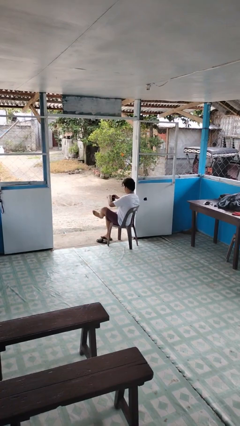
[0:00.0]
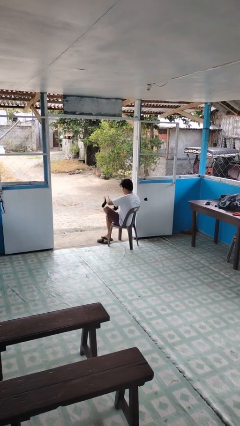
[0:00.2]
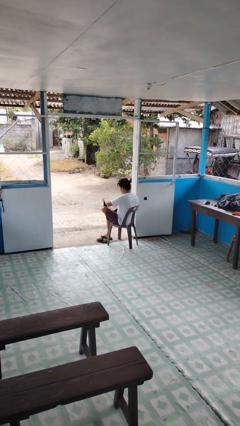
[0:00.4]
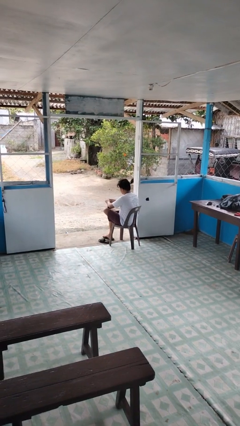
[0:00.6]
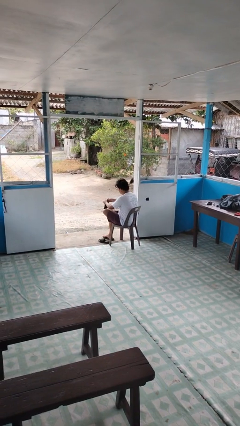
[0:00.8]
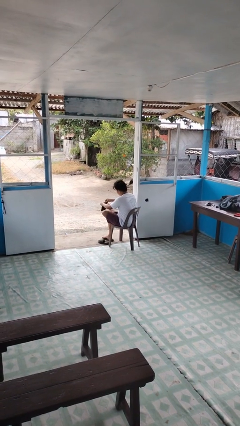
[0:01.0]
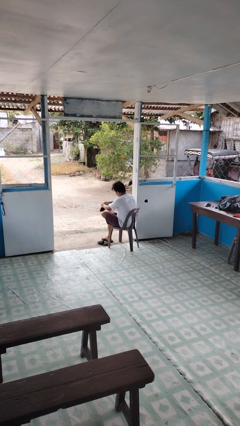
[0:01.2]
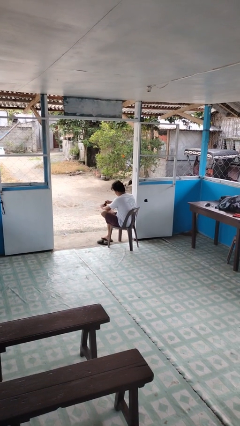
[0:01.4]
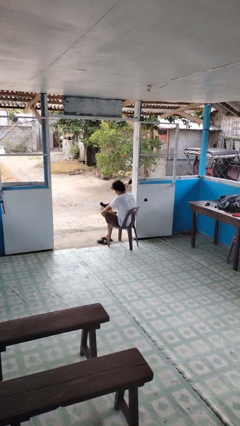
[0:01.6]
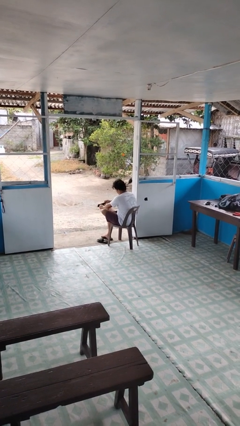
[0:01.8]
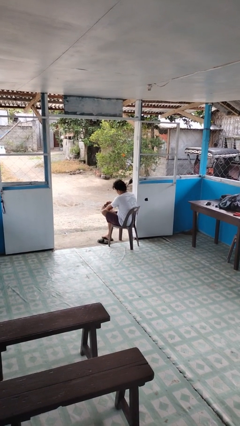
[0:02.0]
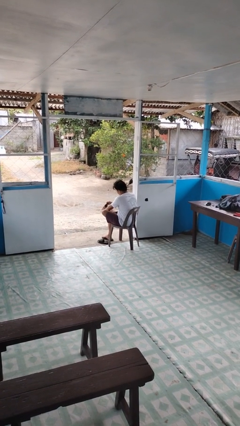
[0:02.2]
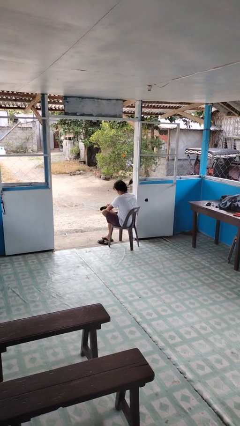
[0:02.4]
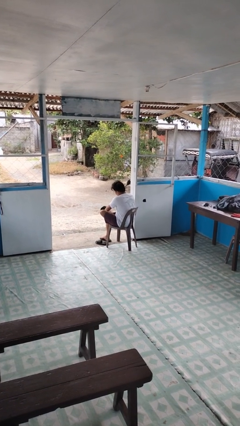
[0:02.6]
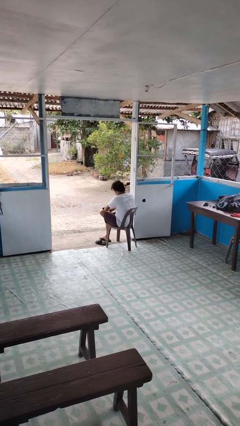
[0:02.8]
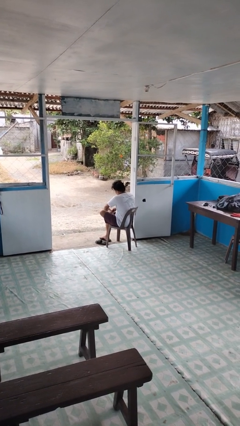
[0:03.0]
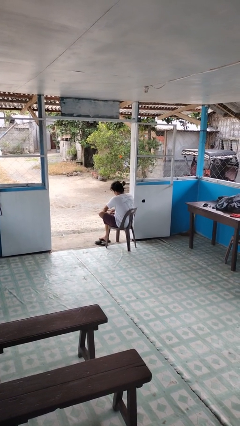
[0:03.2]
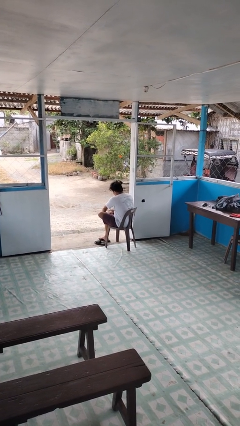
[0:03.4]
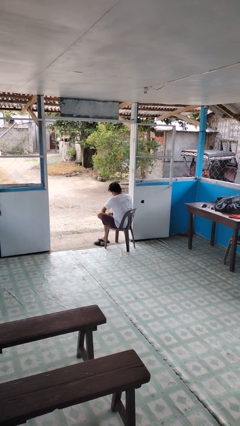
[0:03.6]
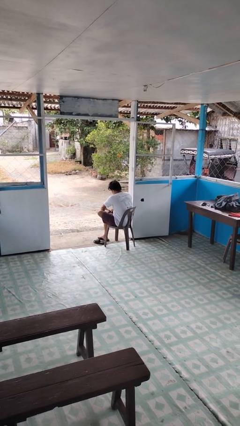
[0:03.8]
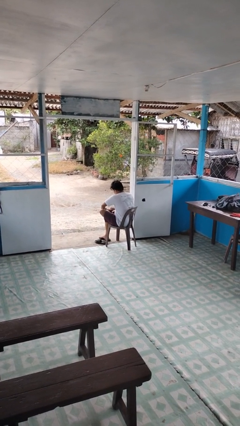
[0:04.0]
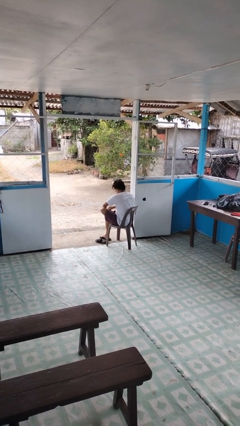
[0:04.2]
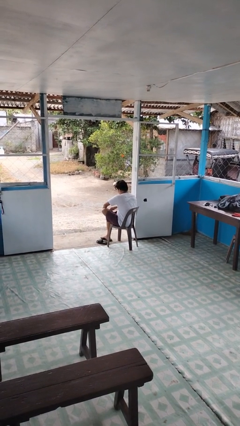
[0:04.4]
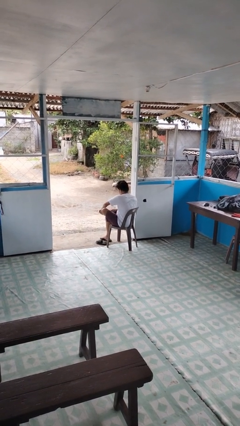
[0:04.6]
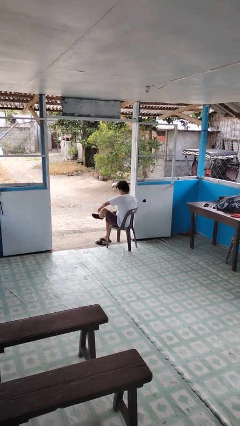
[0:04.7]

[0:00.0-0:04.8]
person puts on socks

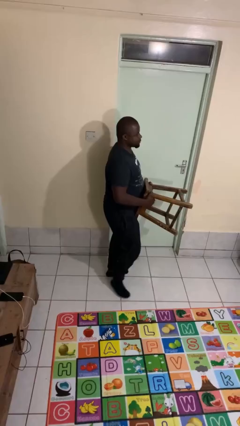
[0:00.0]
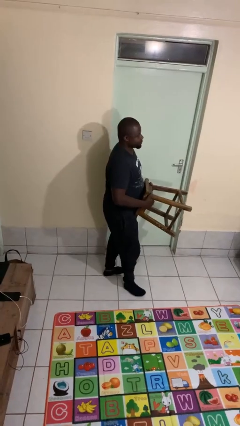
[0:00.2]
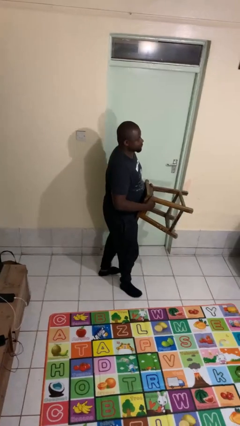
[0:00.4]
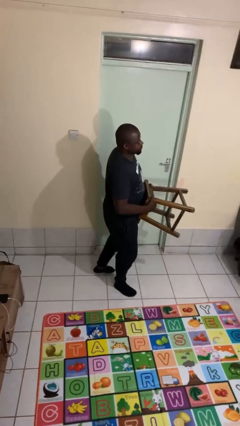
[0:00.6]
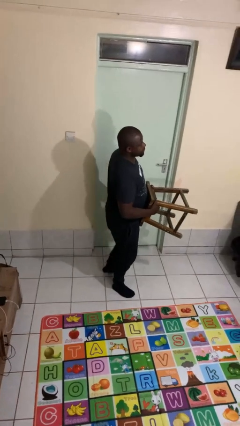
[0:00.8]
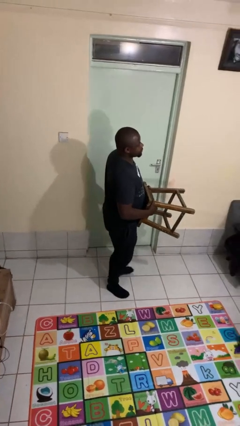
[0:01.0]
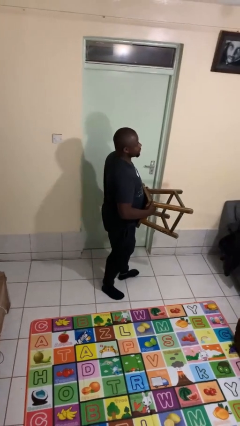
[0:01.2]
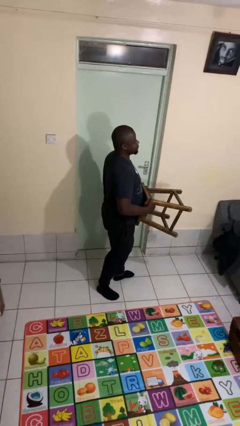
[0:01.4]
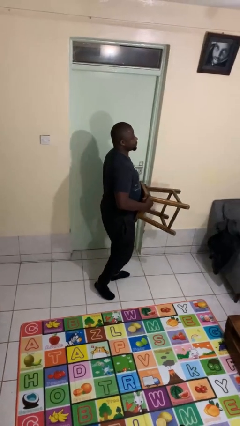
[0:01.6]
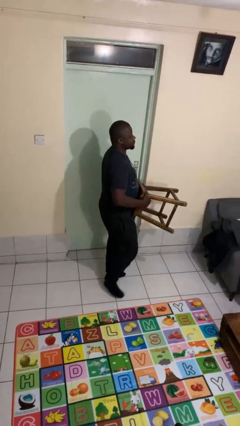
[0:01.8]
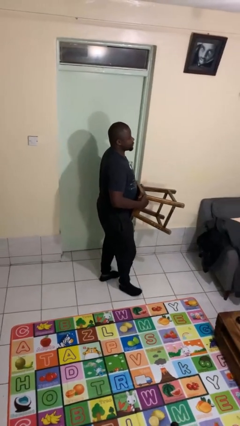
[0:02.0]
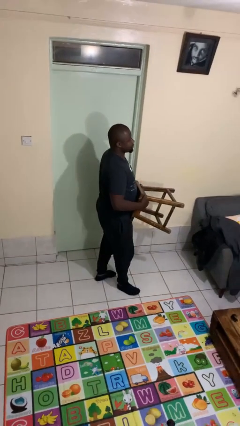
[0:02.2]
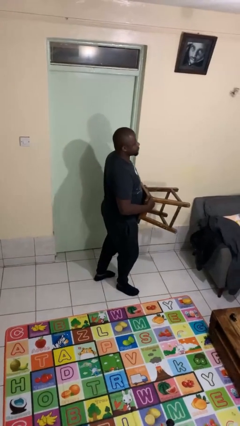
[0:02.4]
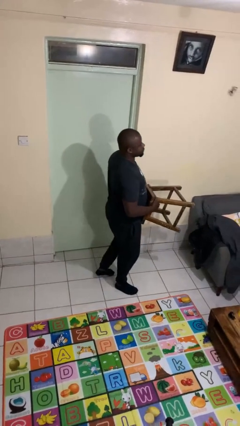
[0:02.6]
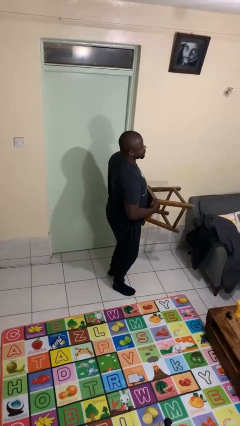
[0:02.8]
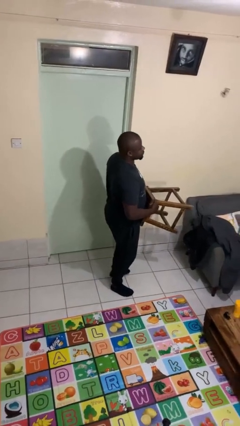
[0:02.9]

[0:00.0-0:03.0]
person carries furniture

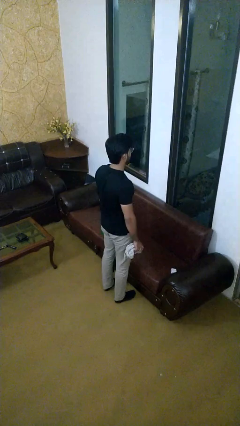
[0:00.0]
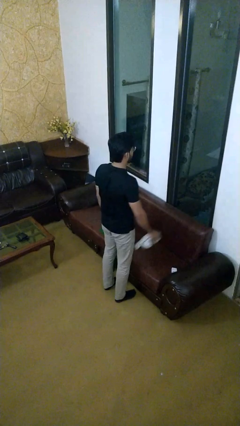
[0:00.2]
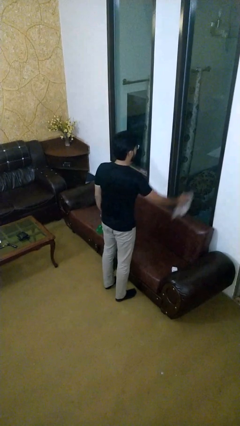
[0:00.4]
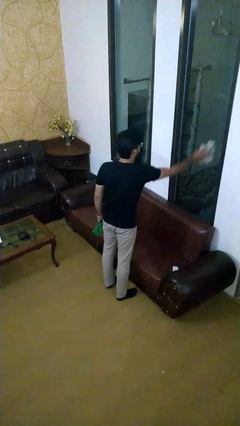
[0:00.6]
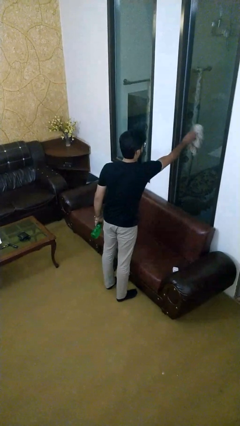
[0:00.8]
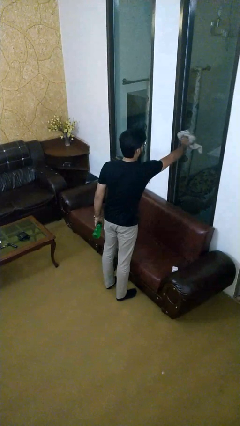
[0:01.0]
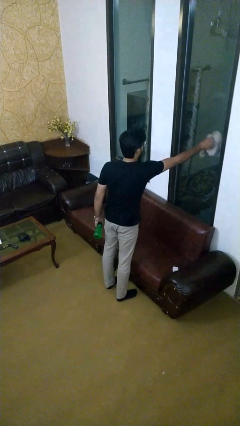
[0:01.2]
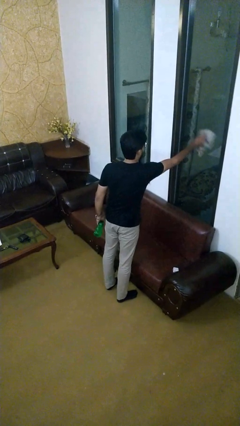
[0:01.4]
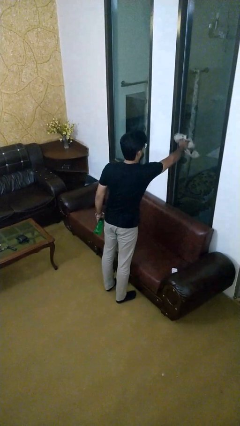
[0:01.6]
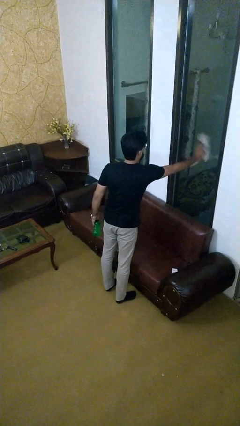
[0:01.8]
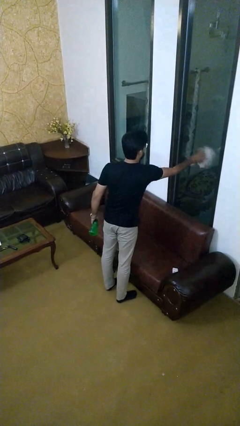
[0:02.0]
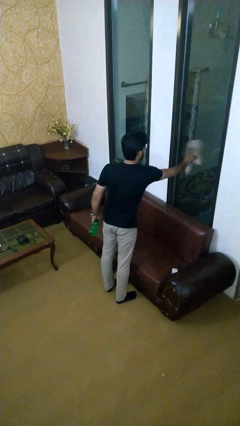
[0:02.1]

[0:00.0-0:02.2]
person washes window

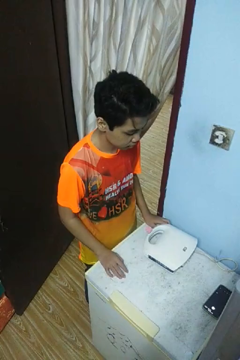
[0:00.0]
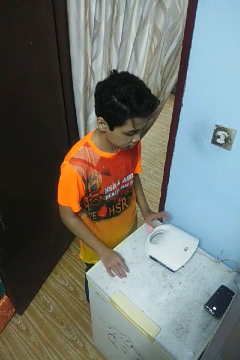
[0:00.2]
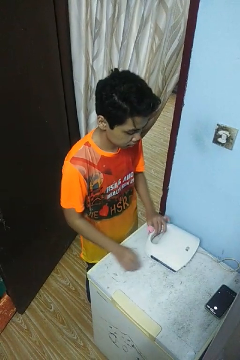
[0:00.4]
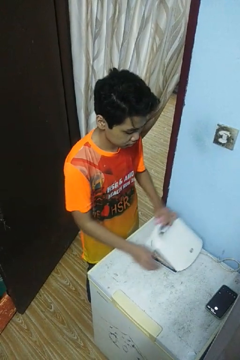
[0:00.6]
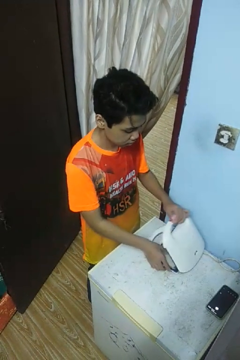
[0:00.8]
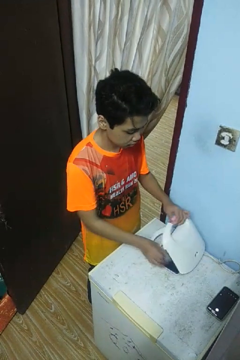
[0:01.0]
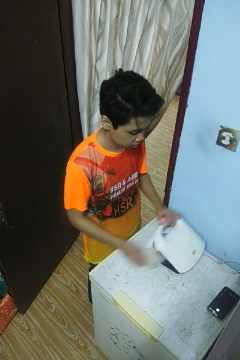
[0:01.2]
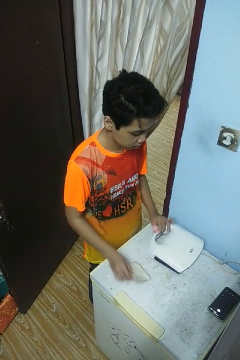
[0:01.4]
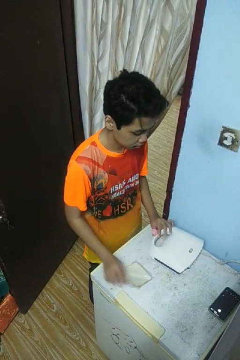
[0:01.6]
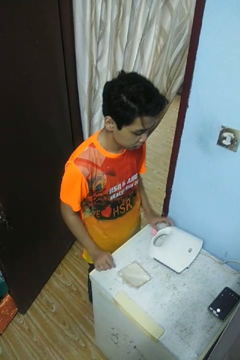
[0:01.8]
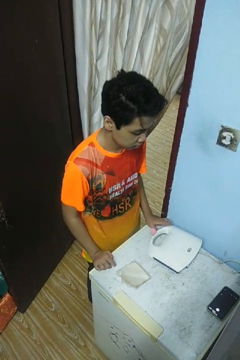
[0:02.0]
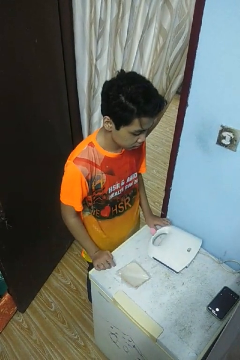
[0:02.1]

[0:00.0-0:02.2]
person takes object from toaster

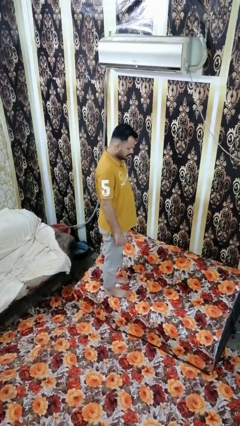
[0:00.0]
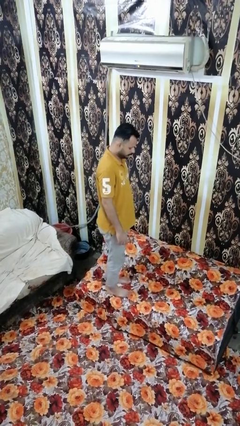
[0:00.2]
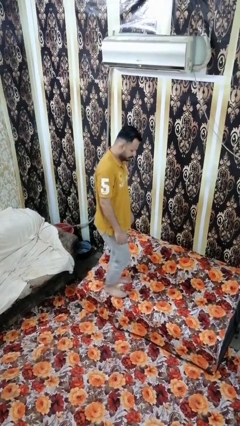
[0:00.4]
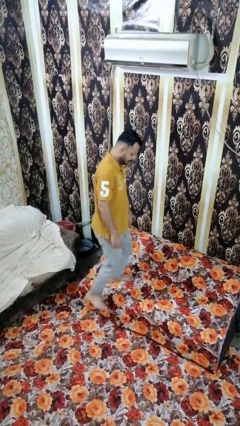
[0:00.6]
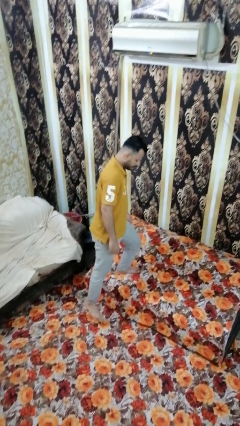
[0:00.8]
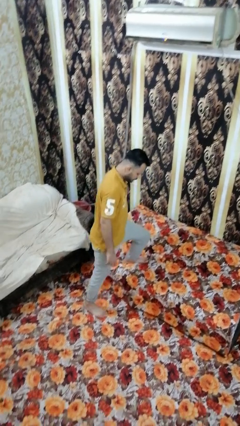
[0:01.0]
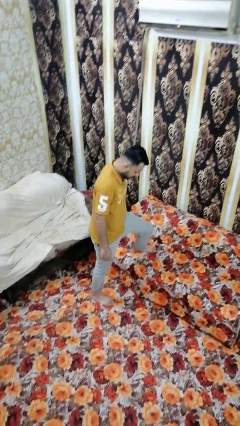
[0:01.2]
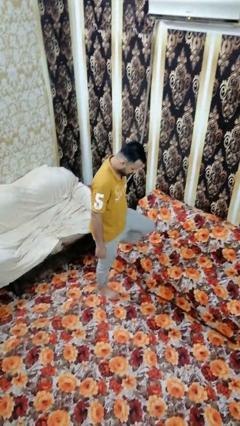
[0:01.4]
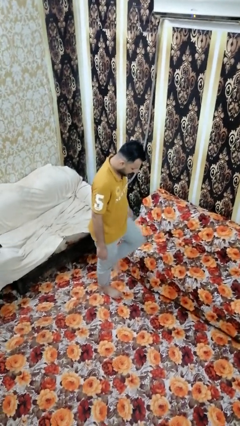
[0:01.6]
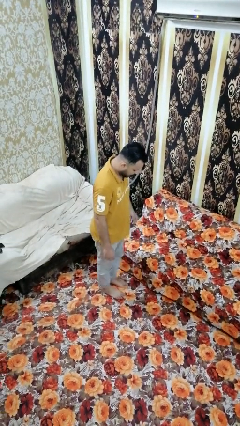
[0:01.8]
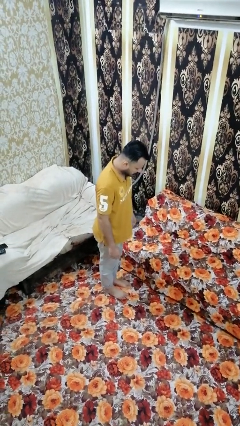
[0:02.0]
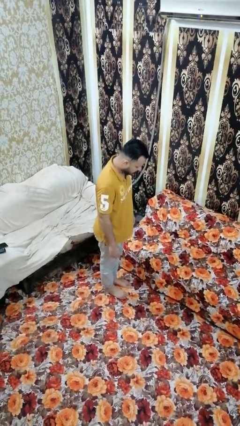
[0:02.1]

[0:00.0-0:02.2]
person climbs off couch

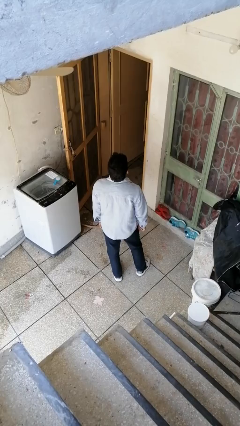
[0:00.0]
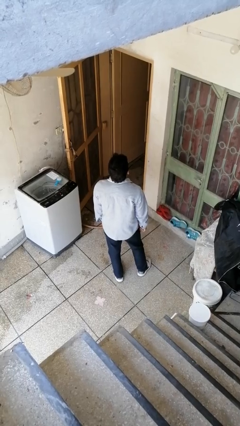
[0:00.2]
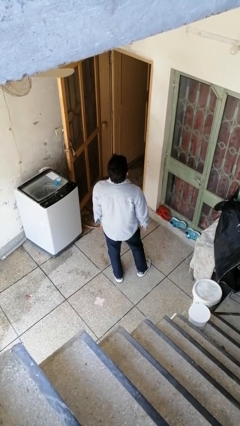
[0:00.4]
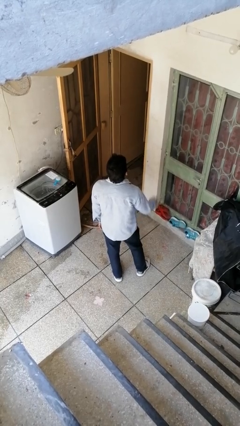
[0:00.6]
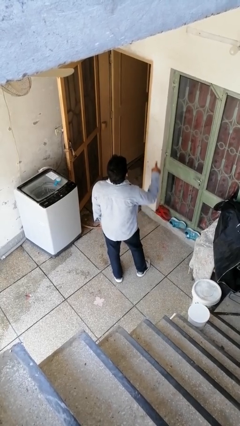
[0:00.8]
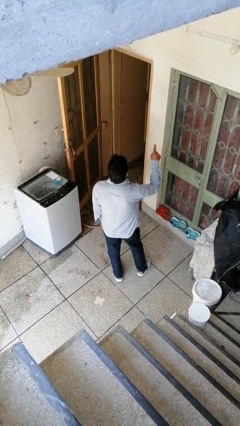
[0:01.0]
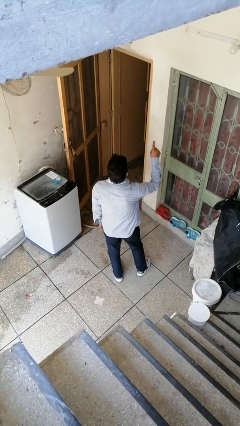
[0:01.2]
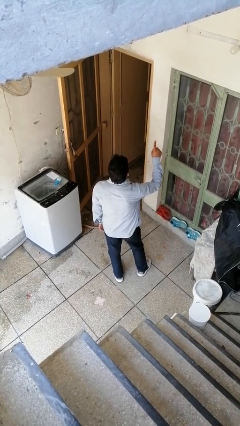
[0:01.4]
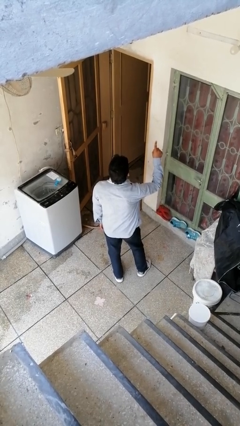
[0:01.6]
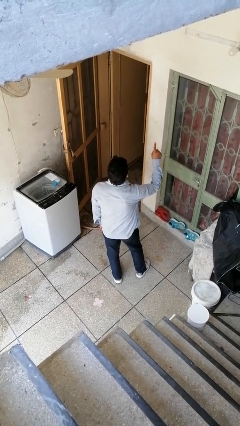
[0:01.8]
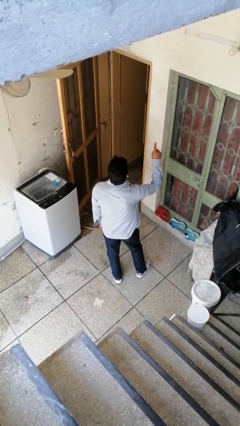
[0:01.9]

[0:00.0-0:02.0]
person gestures number one

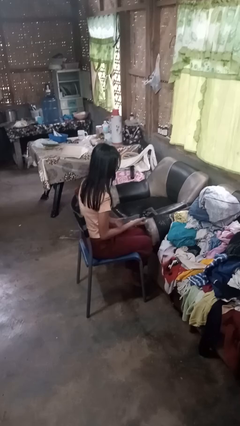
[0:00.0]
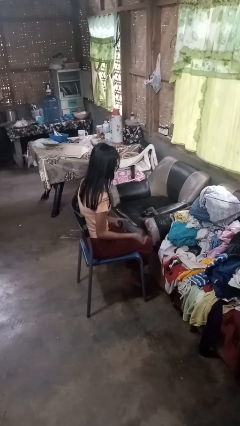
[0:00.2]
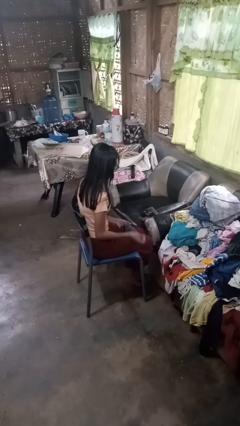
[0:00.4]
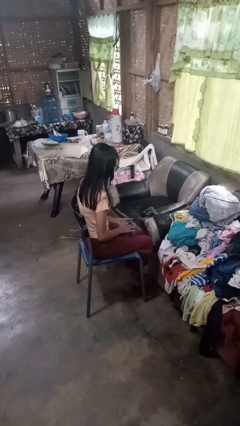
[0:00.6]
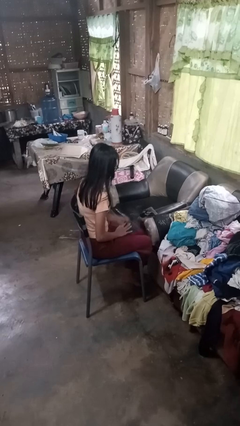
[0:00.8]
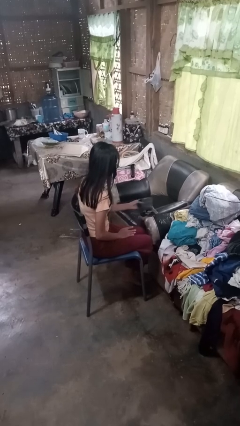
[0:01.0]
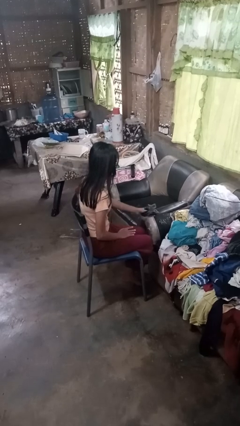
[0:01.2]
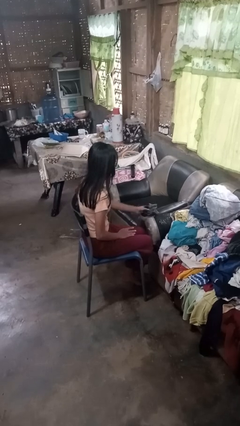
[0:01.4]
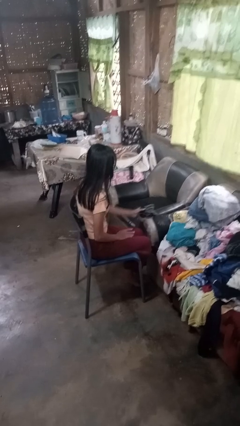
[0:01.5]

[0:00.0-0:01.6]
person folds socks
